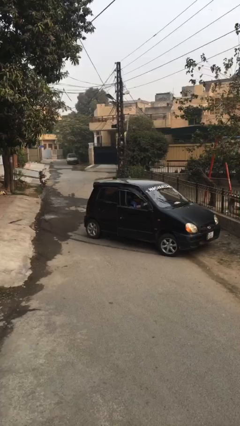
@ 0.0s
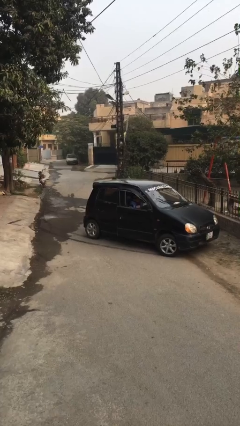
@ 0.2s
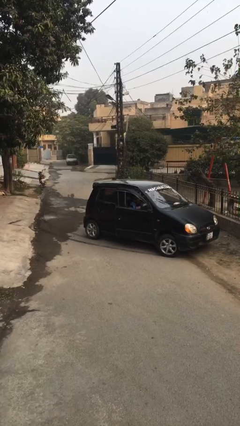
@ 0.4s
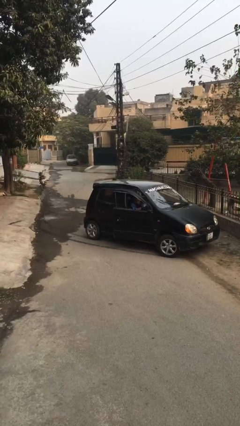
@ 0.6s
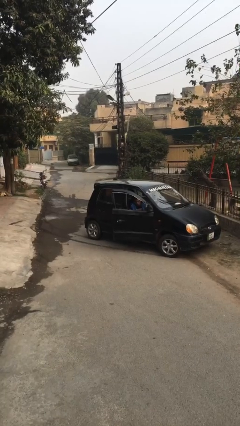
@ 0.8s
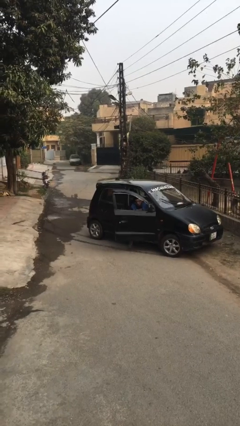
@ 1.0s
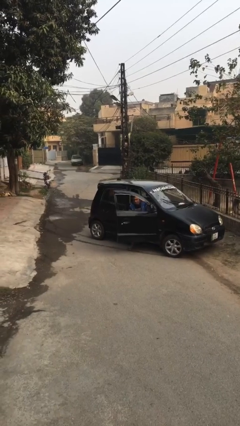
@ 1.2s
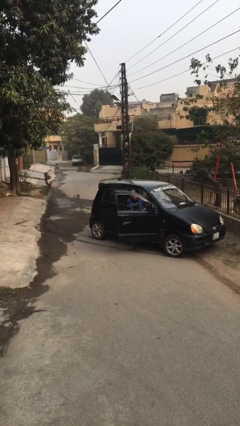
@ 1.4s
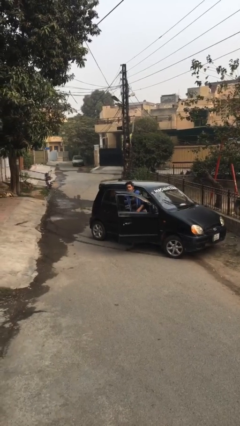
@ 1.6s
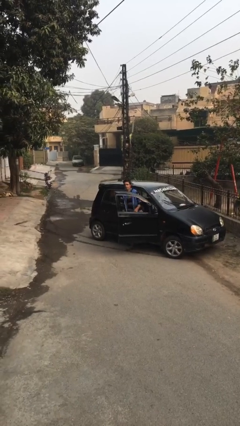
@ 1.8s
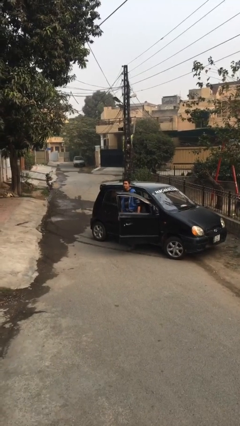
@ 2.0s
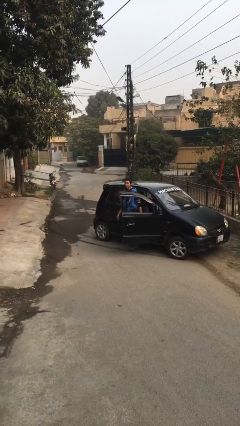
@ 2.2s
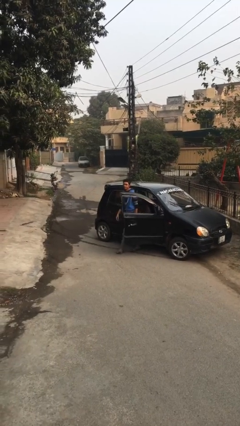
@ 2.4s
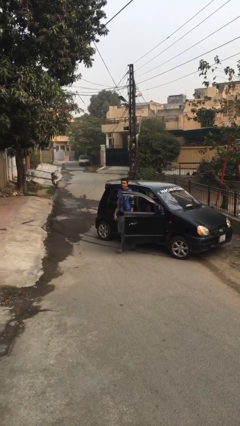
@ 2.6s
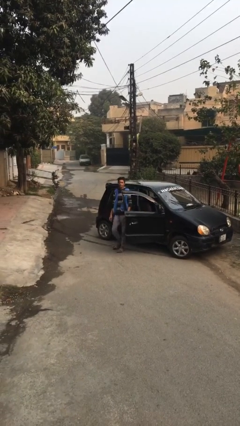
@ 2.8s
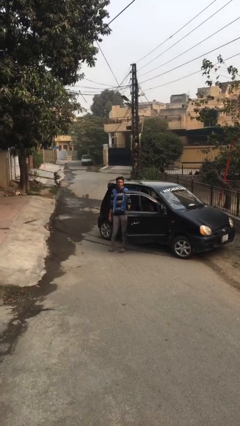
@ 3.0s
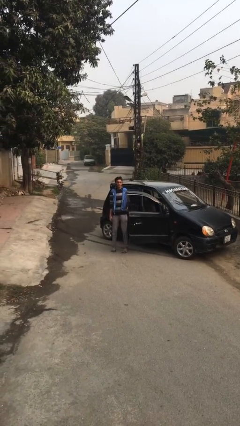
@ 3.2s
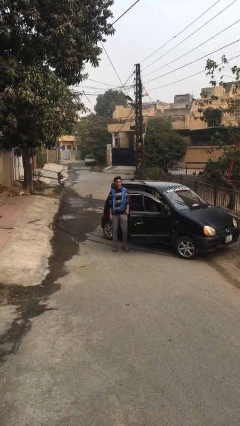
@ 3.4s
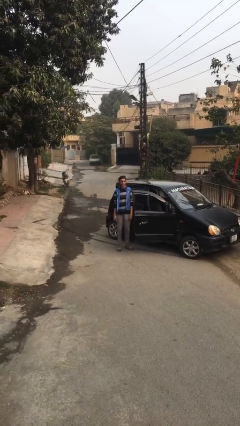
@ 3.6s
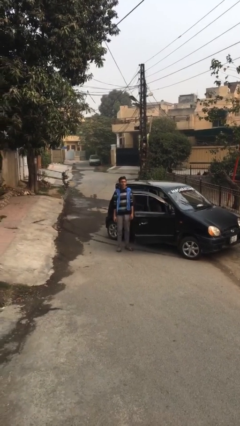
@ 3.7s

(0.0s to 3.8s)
person exits car

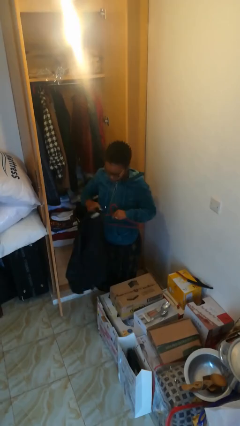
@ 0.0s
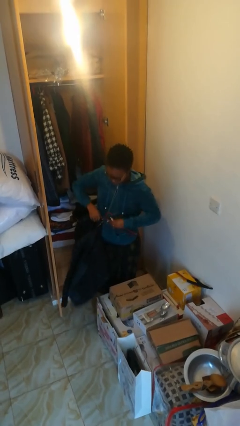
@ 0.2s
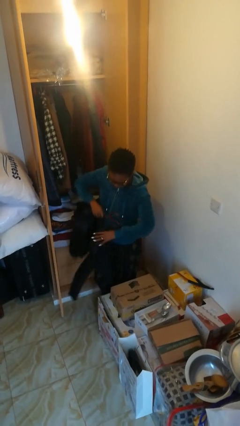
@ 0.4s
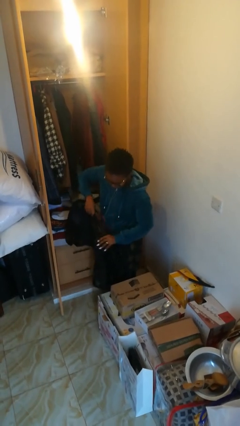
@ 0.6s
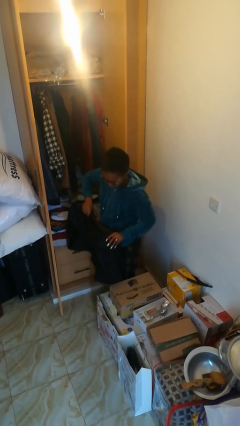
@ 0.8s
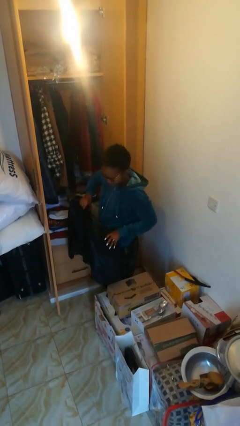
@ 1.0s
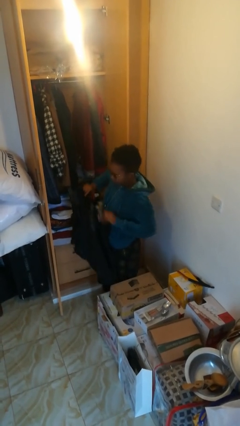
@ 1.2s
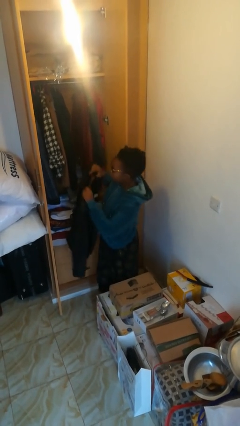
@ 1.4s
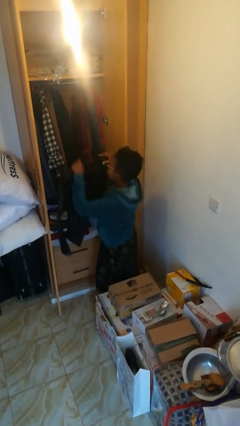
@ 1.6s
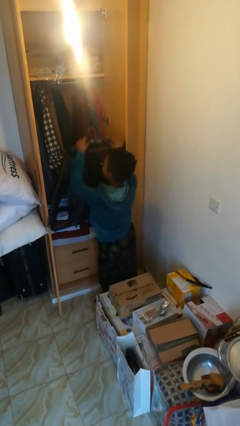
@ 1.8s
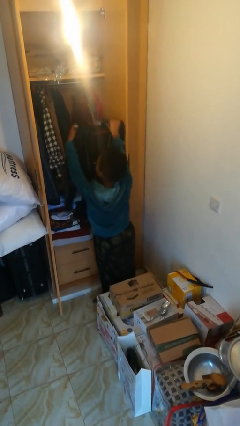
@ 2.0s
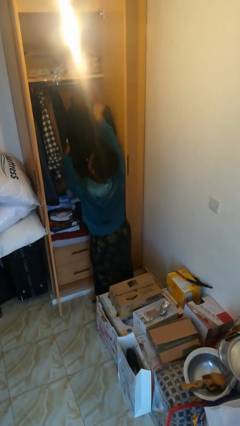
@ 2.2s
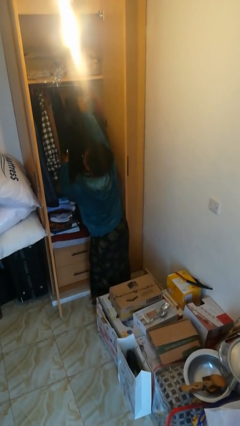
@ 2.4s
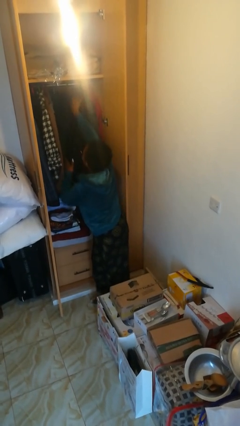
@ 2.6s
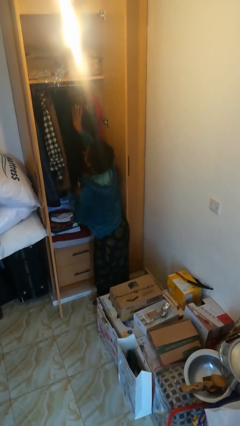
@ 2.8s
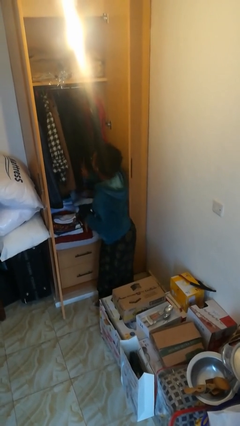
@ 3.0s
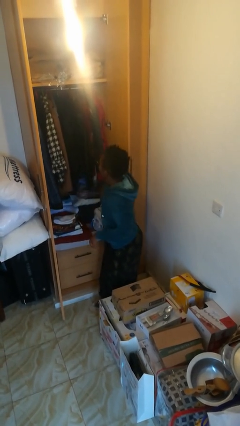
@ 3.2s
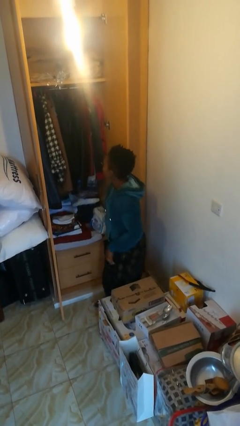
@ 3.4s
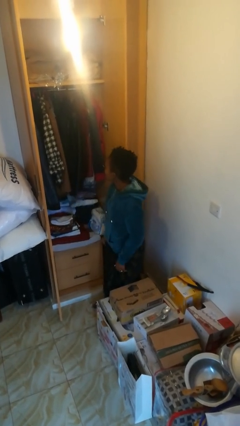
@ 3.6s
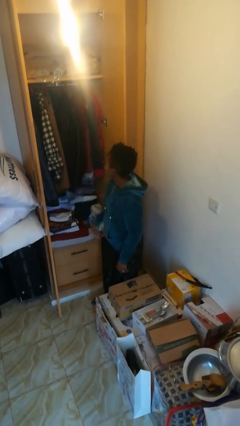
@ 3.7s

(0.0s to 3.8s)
person puts clothes into closet

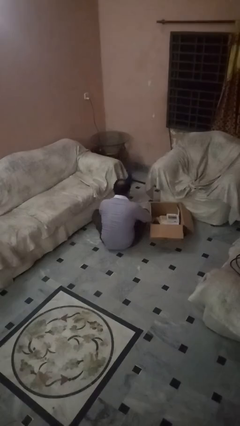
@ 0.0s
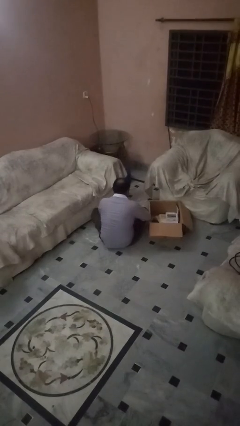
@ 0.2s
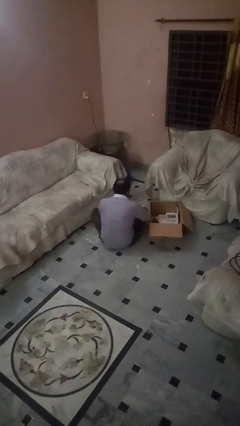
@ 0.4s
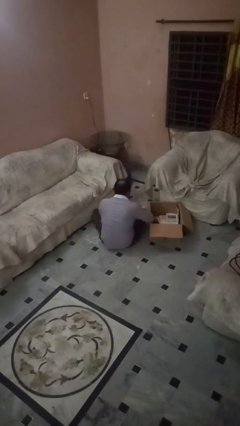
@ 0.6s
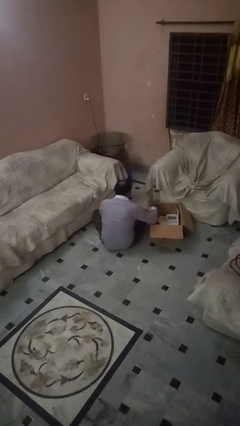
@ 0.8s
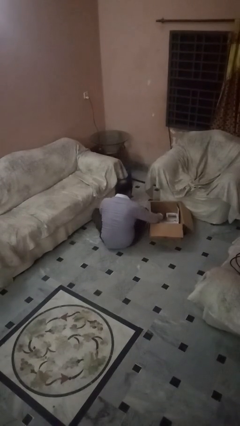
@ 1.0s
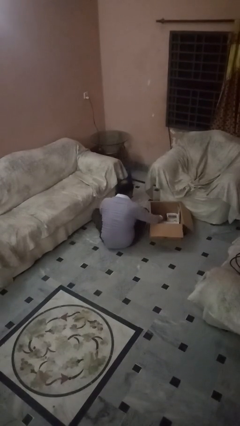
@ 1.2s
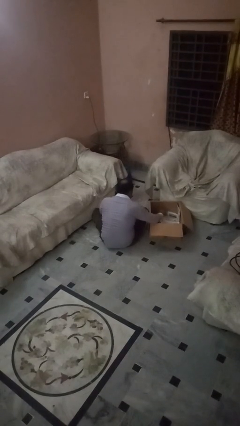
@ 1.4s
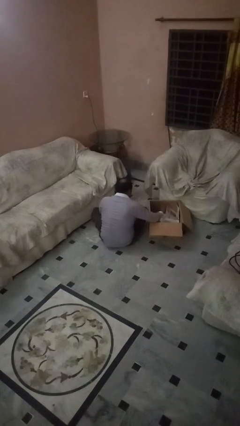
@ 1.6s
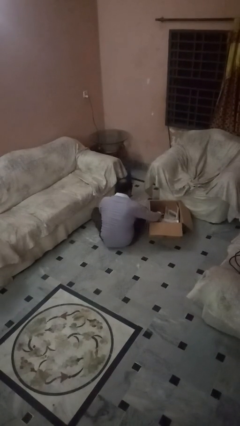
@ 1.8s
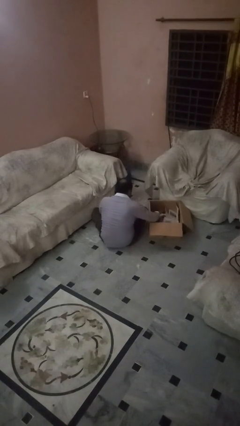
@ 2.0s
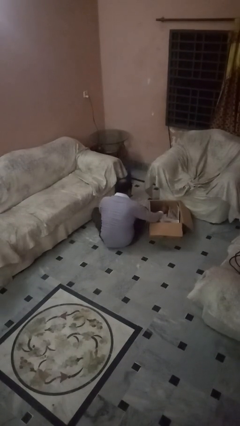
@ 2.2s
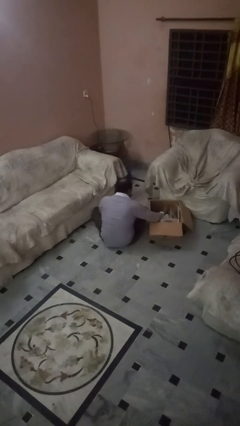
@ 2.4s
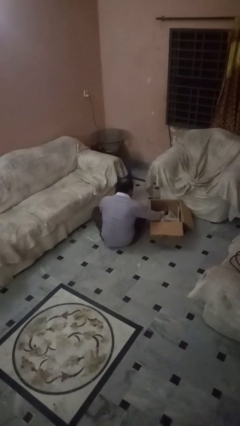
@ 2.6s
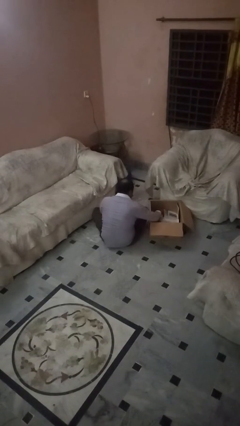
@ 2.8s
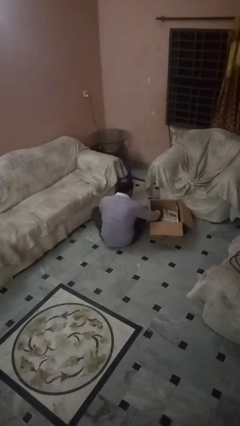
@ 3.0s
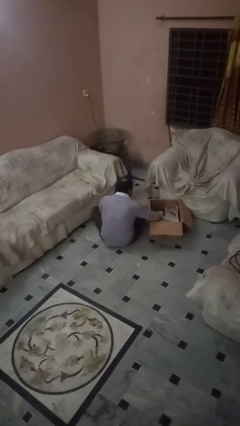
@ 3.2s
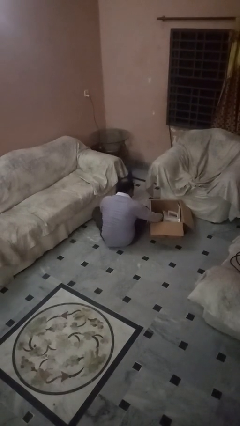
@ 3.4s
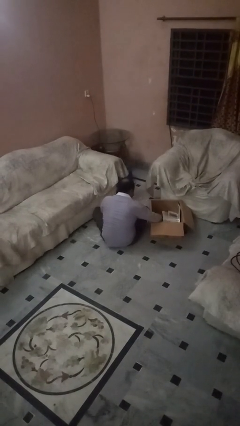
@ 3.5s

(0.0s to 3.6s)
person searches in box

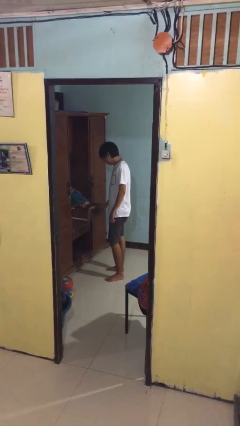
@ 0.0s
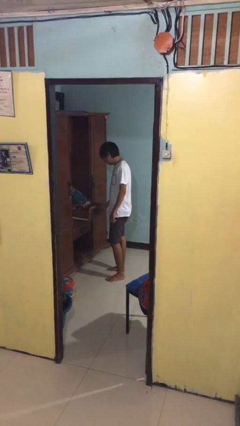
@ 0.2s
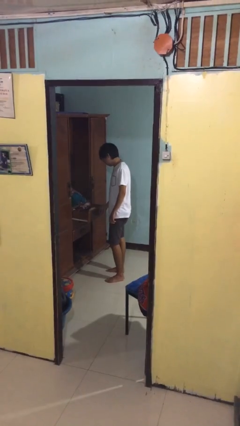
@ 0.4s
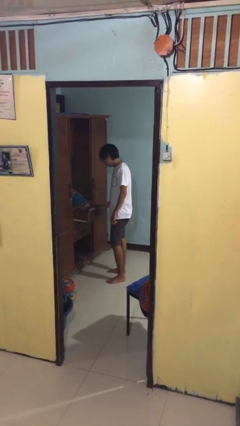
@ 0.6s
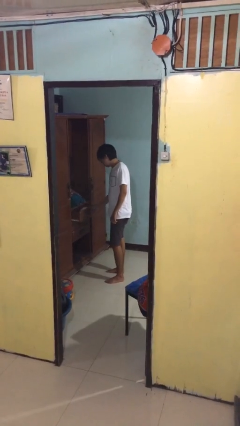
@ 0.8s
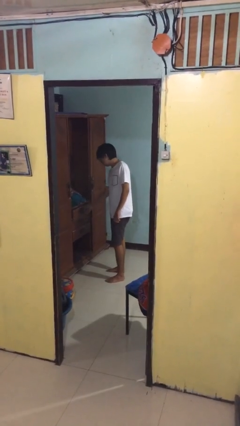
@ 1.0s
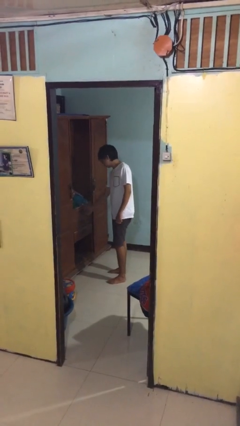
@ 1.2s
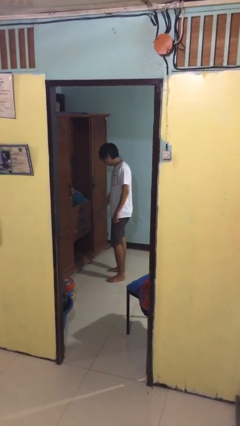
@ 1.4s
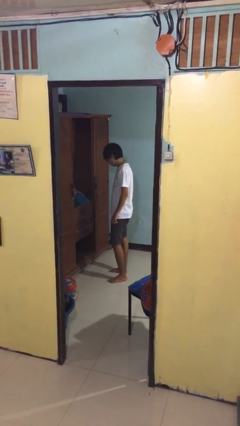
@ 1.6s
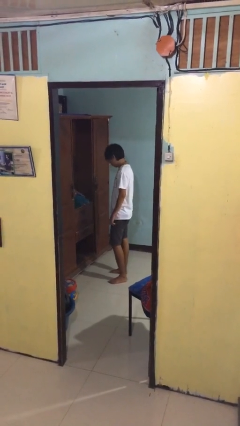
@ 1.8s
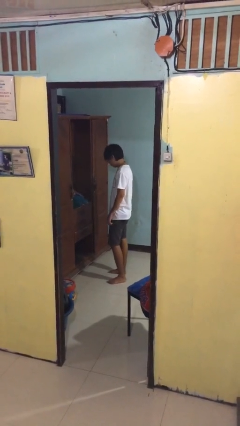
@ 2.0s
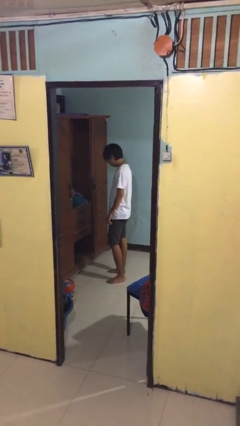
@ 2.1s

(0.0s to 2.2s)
person closes dresser drawer

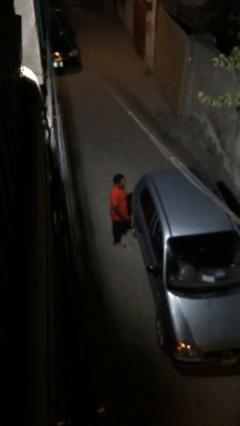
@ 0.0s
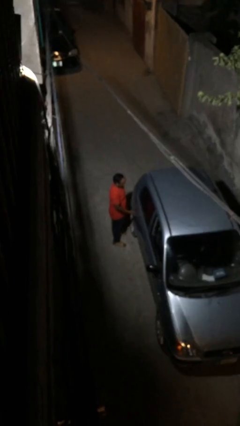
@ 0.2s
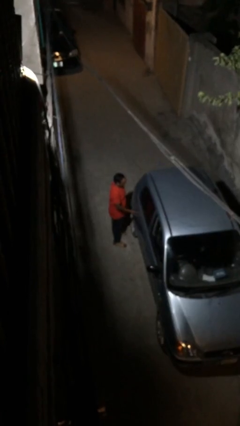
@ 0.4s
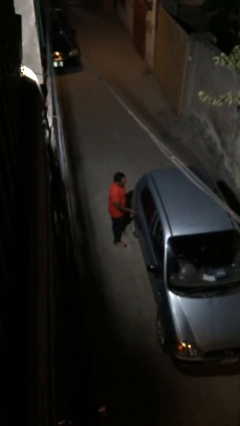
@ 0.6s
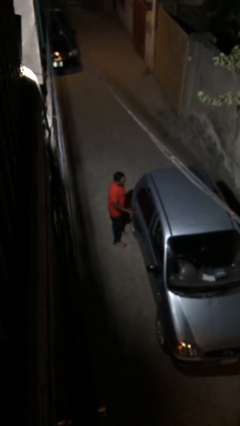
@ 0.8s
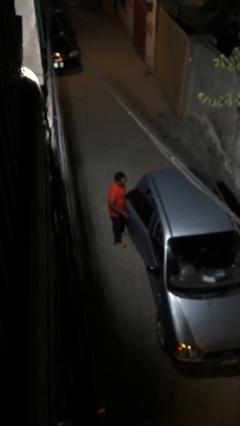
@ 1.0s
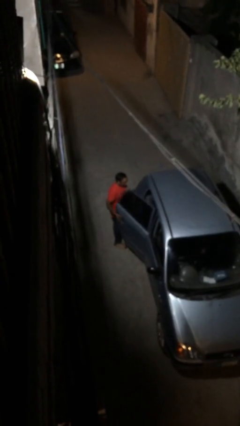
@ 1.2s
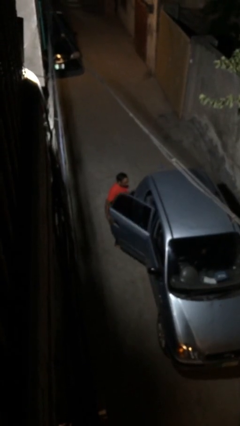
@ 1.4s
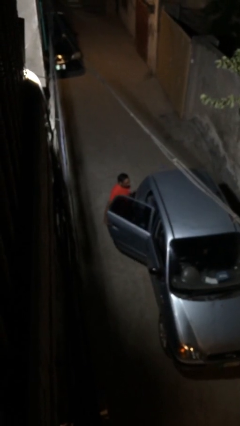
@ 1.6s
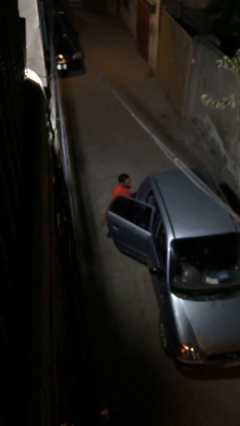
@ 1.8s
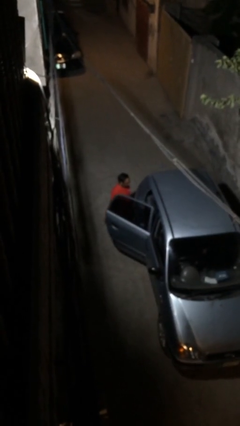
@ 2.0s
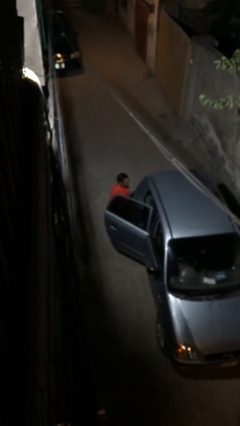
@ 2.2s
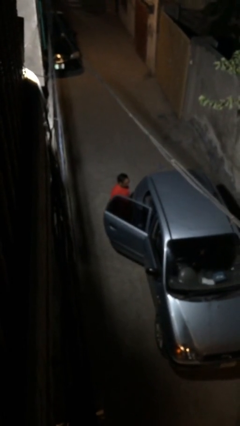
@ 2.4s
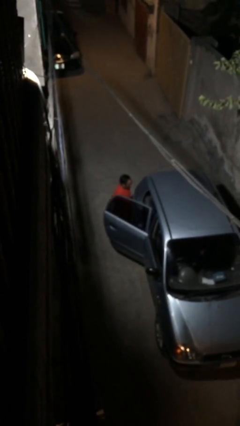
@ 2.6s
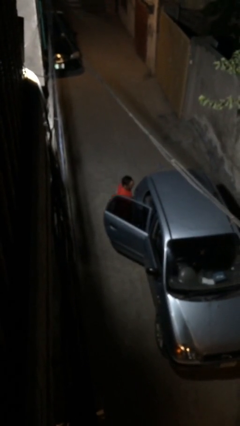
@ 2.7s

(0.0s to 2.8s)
person opens car door

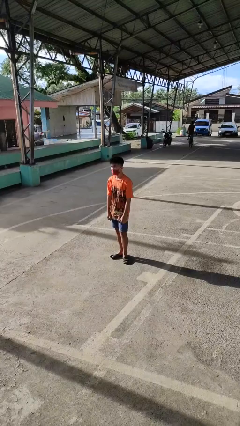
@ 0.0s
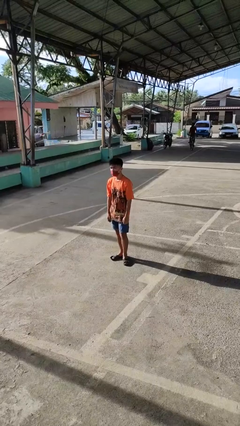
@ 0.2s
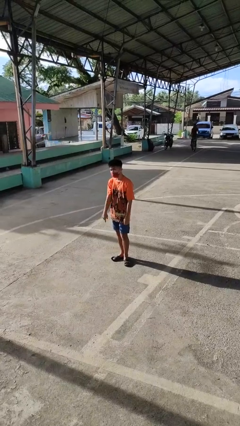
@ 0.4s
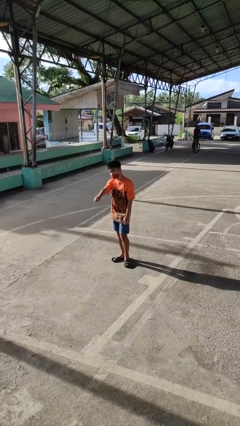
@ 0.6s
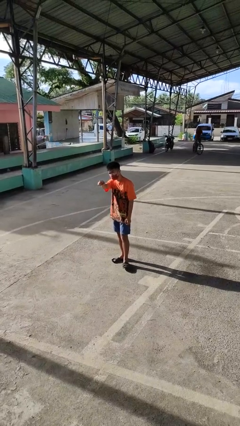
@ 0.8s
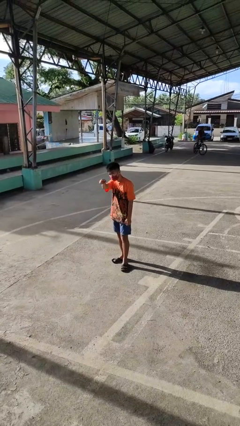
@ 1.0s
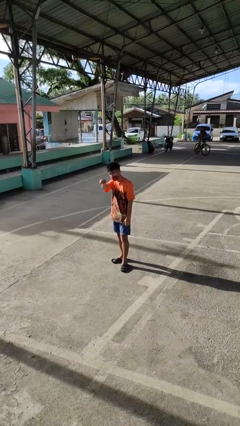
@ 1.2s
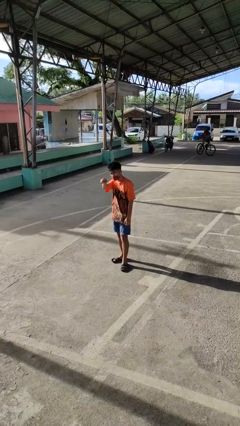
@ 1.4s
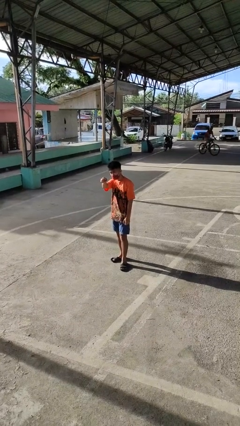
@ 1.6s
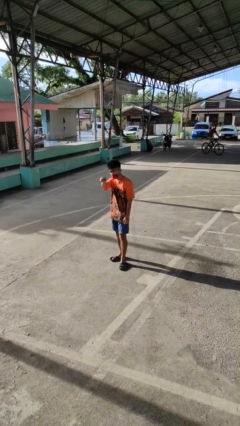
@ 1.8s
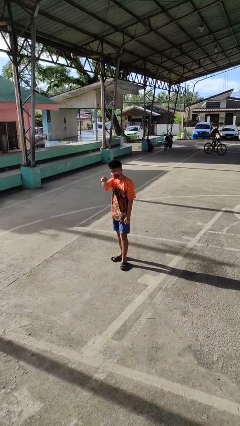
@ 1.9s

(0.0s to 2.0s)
person points at person
